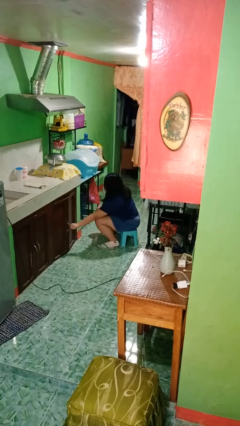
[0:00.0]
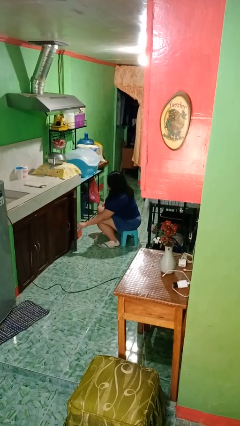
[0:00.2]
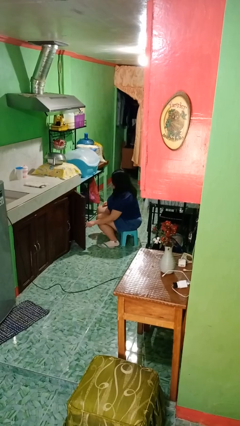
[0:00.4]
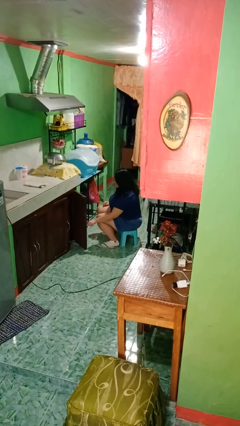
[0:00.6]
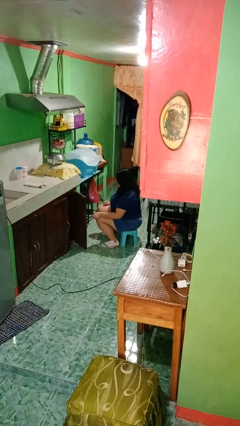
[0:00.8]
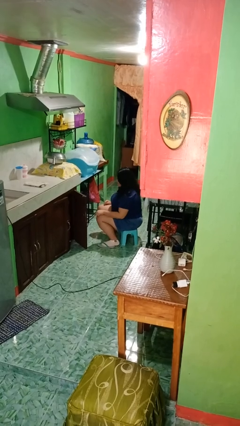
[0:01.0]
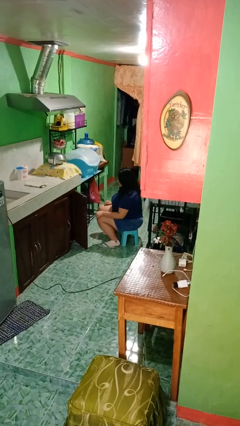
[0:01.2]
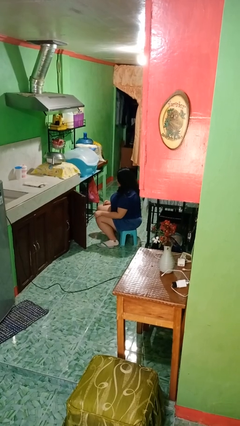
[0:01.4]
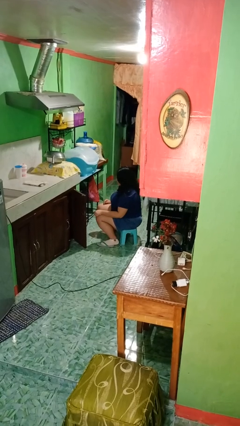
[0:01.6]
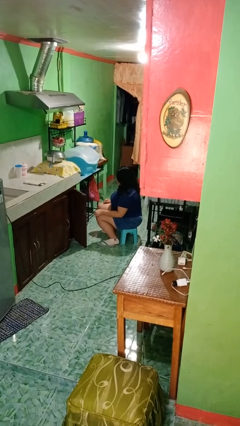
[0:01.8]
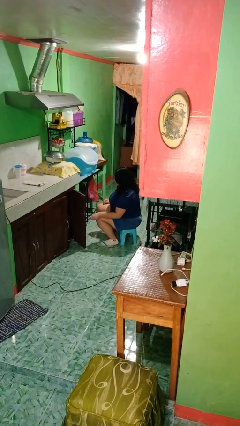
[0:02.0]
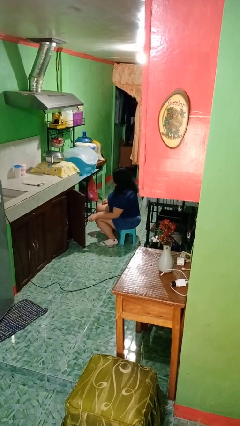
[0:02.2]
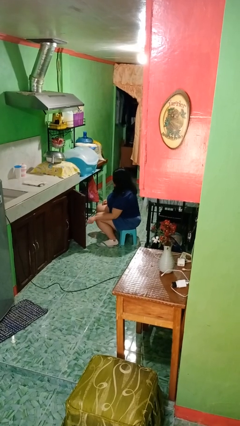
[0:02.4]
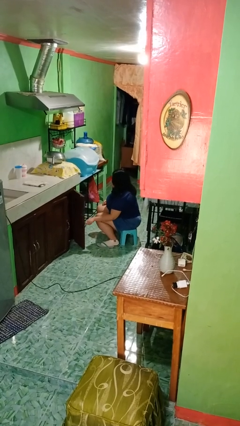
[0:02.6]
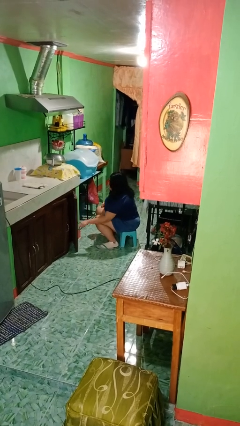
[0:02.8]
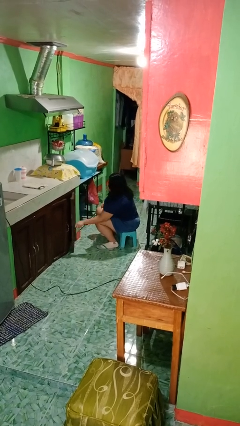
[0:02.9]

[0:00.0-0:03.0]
person opens cabinet

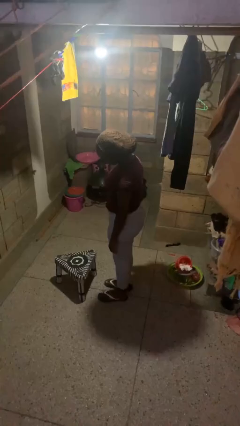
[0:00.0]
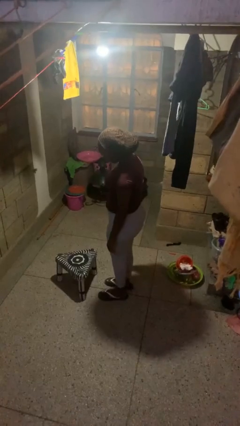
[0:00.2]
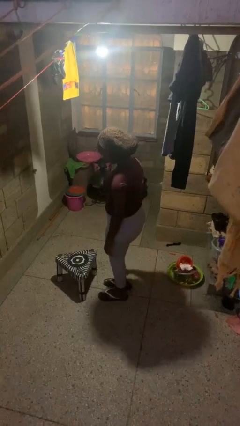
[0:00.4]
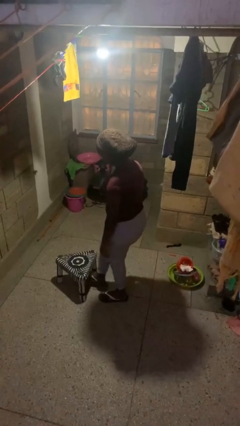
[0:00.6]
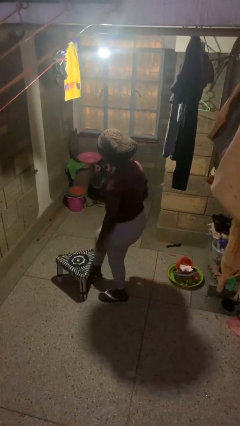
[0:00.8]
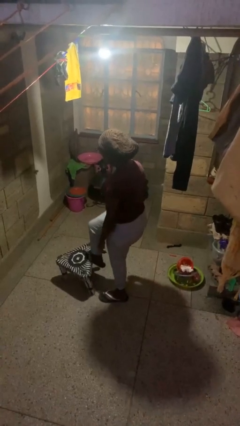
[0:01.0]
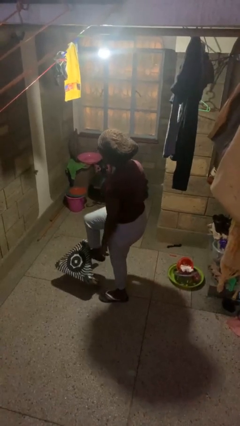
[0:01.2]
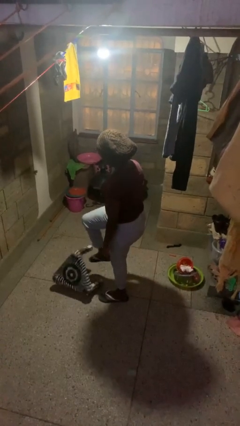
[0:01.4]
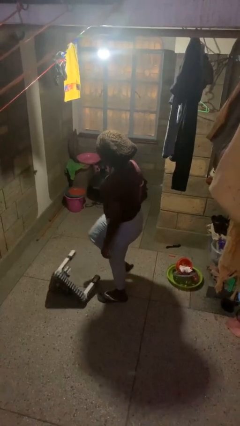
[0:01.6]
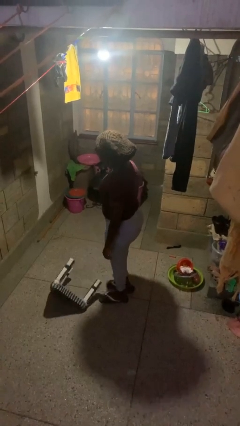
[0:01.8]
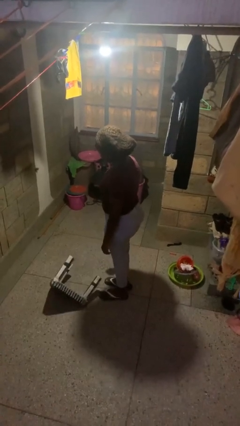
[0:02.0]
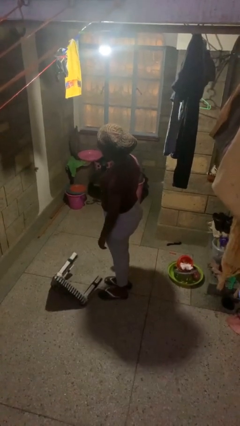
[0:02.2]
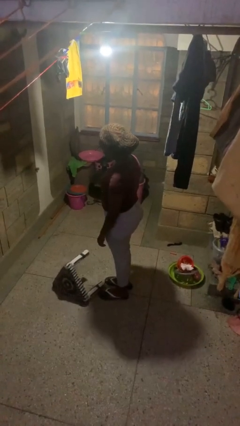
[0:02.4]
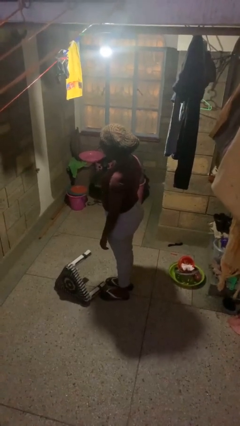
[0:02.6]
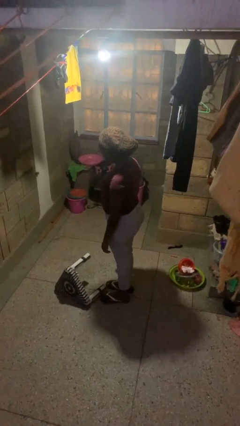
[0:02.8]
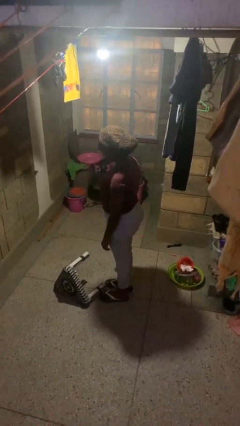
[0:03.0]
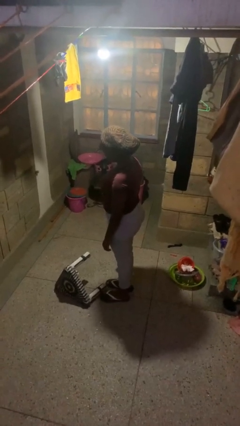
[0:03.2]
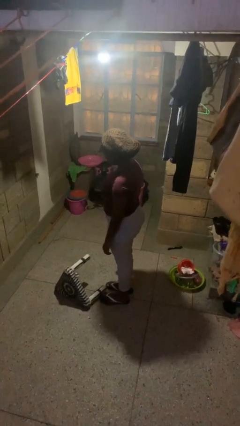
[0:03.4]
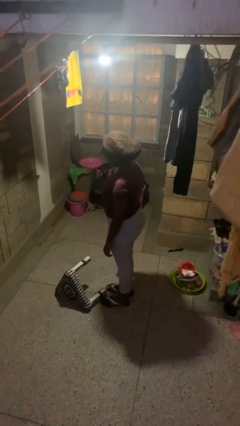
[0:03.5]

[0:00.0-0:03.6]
person knocks over furniture

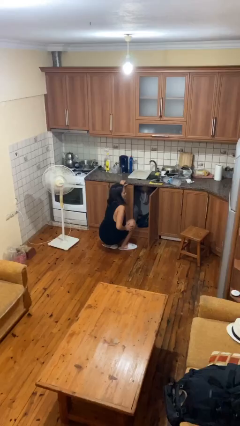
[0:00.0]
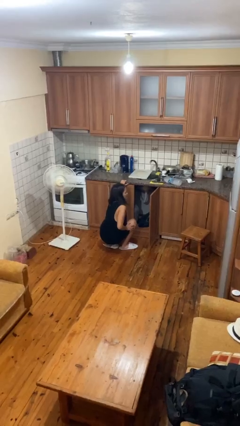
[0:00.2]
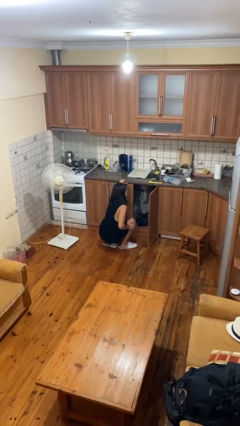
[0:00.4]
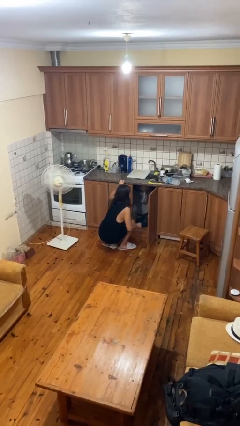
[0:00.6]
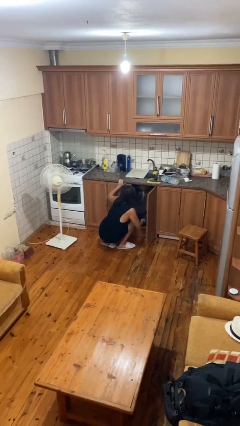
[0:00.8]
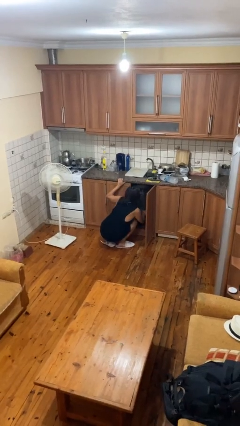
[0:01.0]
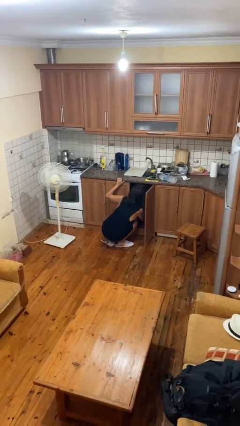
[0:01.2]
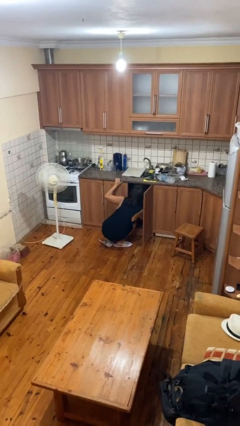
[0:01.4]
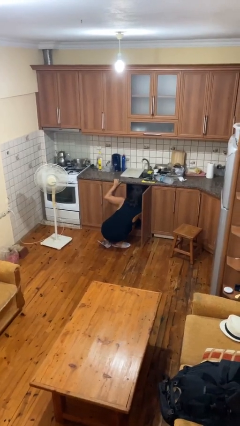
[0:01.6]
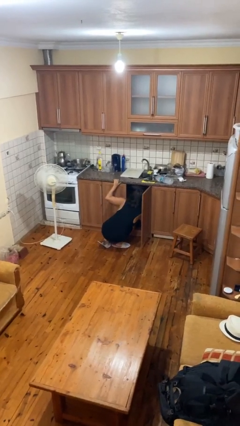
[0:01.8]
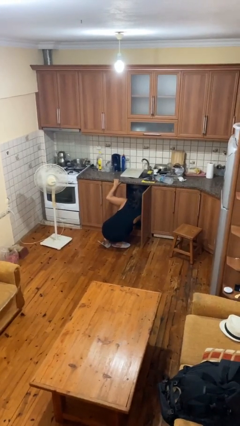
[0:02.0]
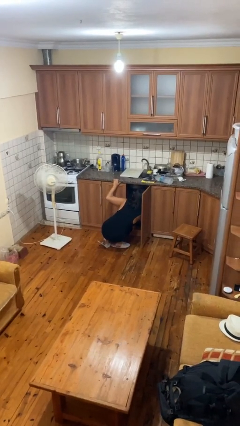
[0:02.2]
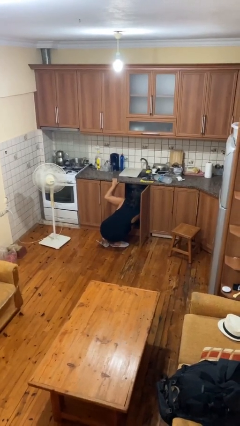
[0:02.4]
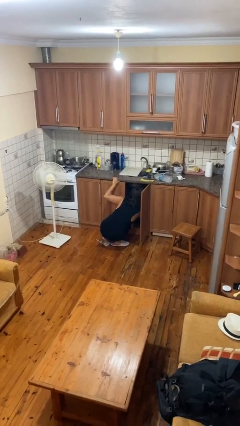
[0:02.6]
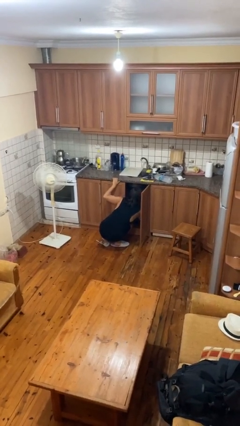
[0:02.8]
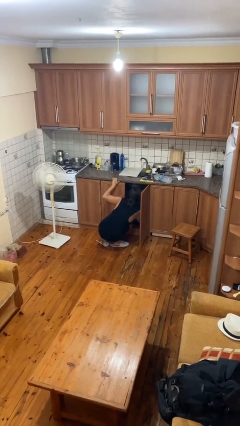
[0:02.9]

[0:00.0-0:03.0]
person searches in cabinet

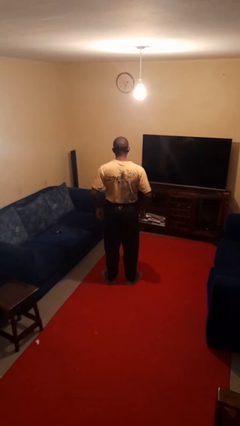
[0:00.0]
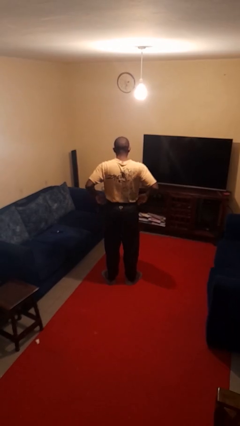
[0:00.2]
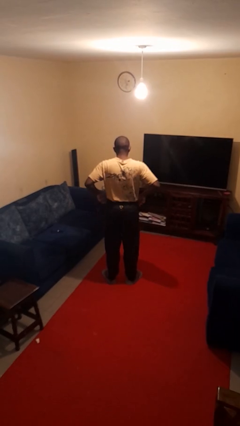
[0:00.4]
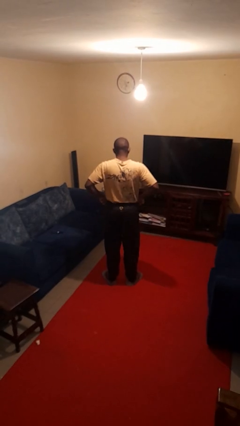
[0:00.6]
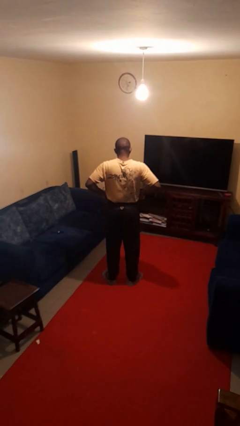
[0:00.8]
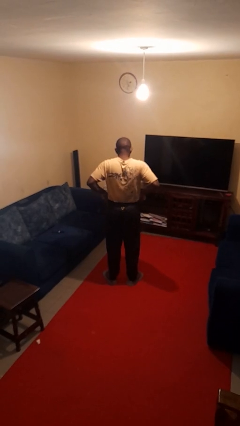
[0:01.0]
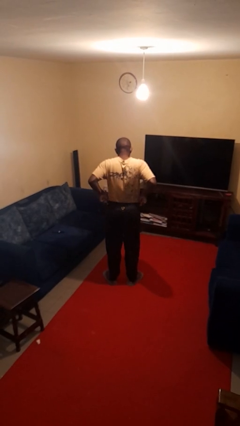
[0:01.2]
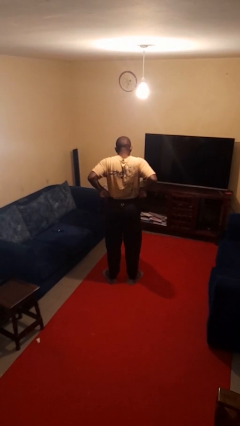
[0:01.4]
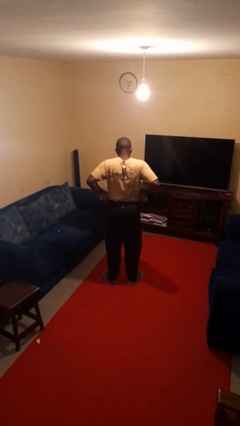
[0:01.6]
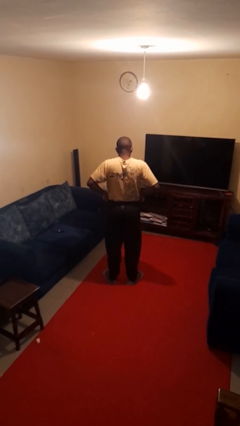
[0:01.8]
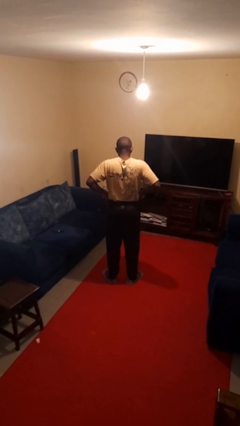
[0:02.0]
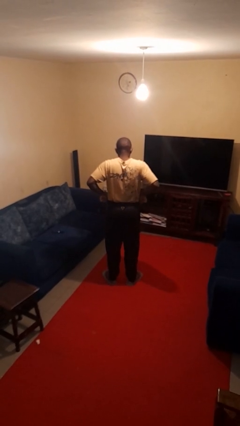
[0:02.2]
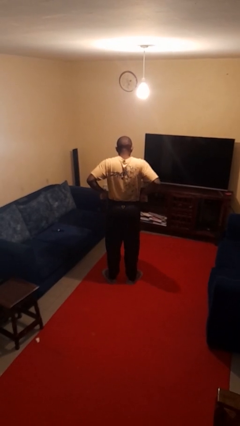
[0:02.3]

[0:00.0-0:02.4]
person hikes up pants

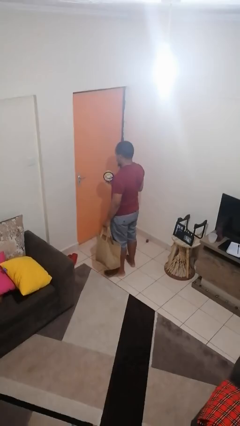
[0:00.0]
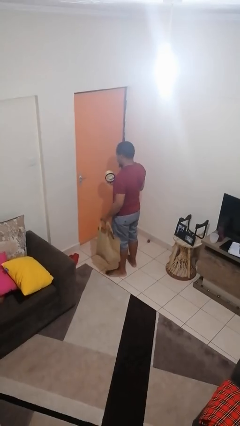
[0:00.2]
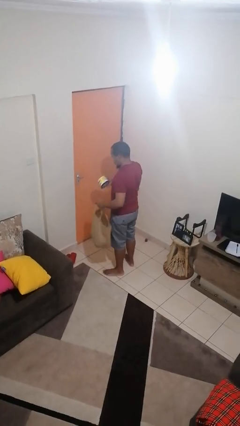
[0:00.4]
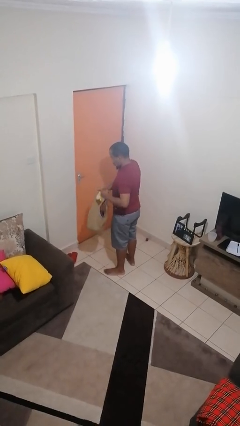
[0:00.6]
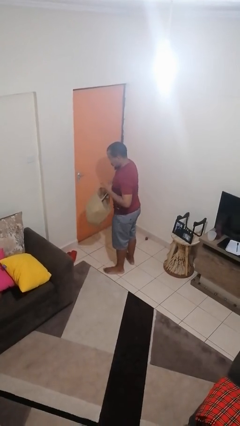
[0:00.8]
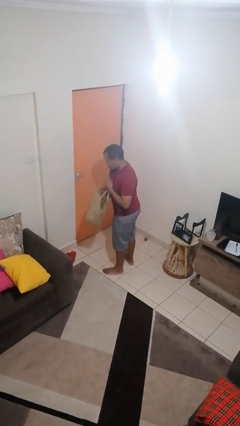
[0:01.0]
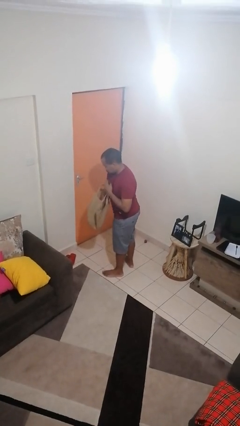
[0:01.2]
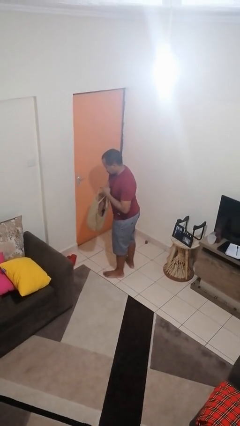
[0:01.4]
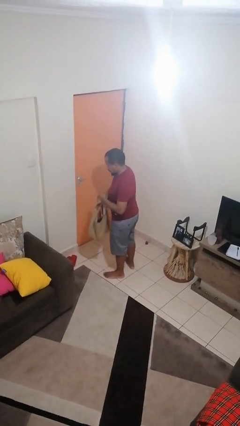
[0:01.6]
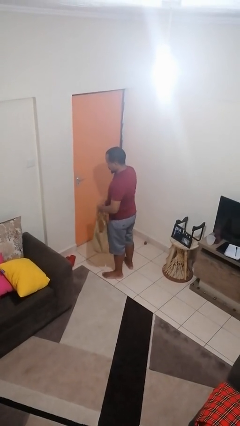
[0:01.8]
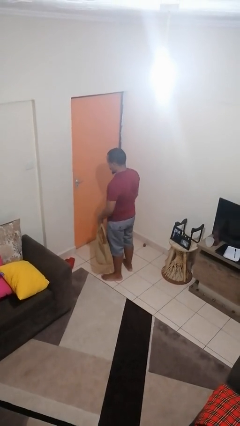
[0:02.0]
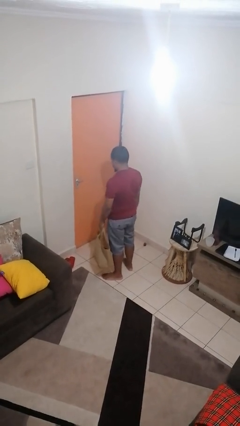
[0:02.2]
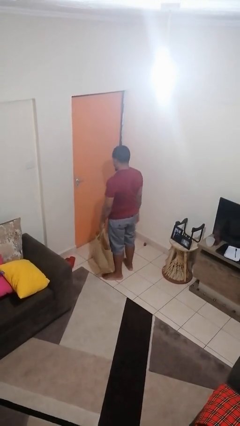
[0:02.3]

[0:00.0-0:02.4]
person puts object into bag

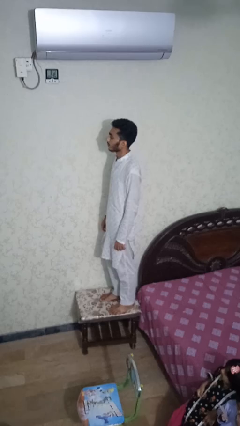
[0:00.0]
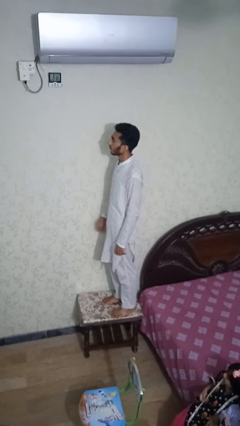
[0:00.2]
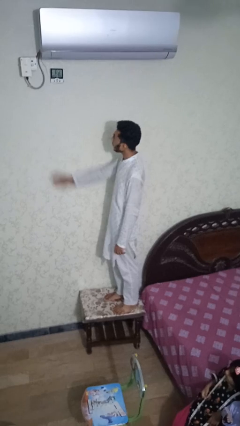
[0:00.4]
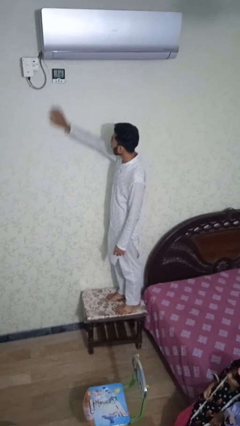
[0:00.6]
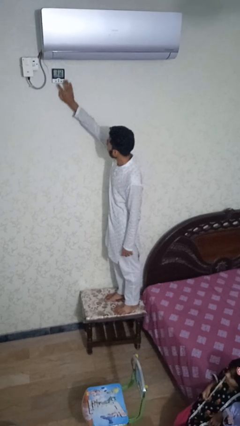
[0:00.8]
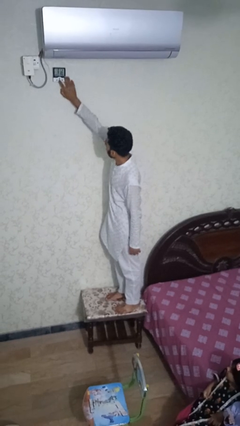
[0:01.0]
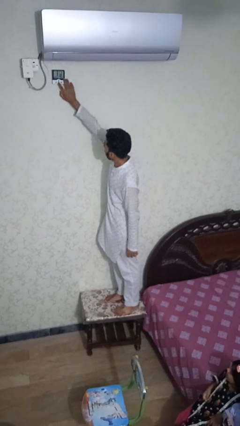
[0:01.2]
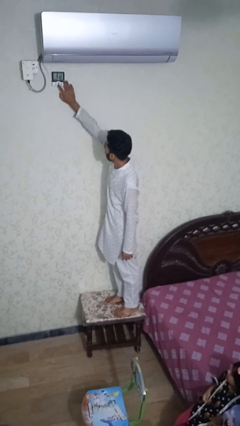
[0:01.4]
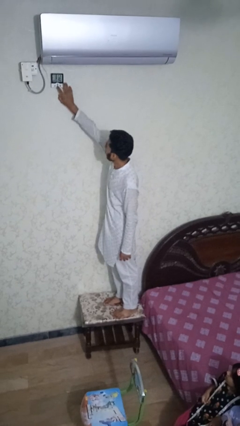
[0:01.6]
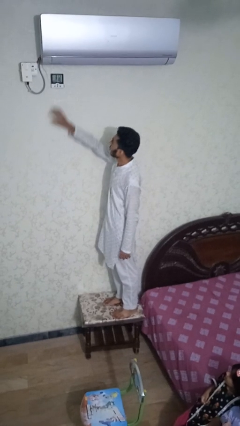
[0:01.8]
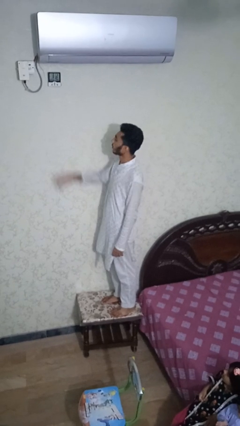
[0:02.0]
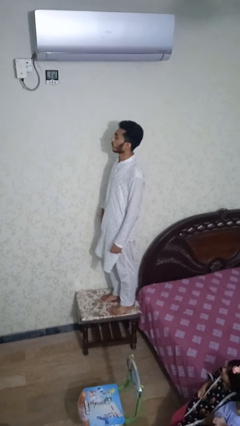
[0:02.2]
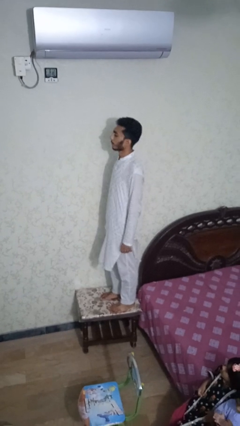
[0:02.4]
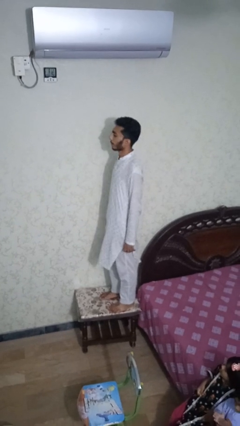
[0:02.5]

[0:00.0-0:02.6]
person adjusts thermostat
